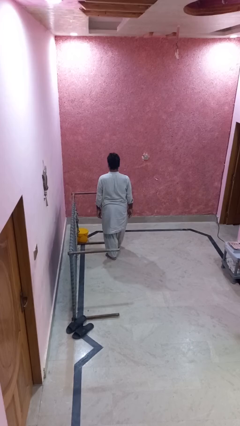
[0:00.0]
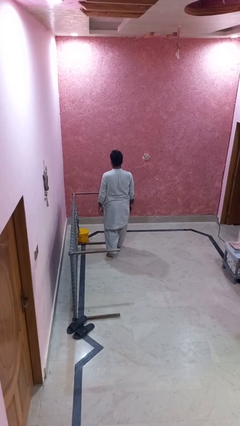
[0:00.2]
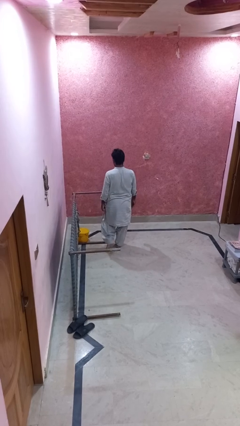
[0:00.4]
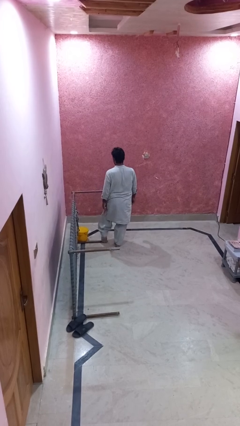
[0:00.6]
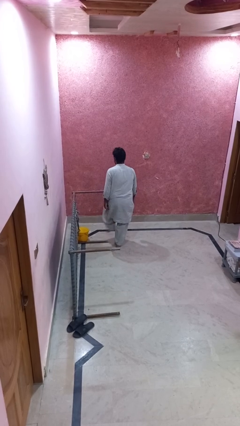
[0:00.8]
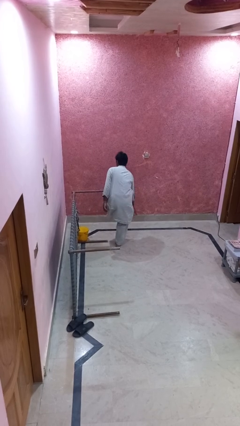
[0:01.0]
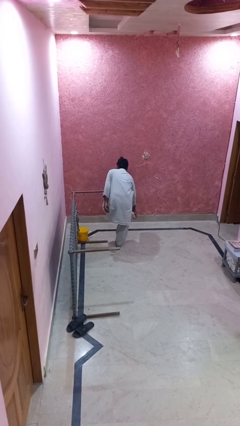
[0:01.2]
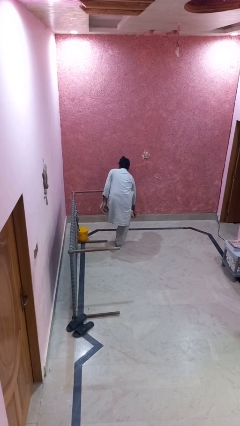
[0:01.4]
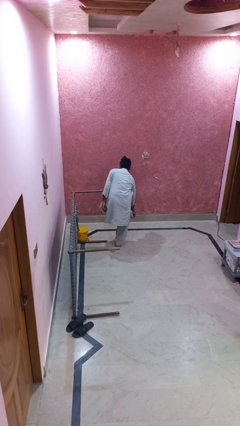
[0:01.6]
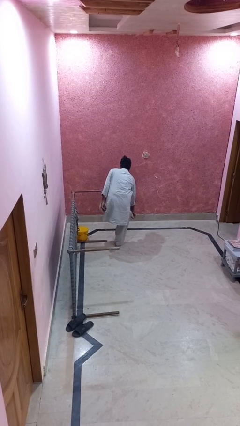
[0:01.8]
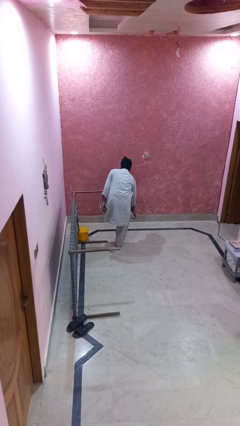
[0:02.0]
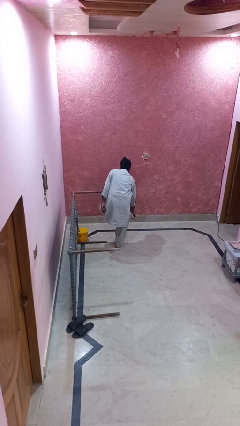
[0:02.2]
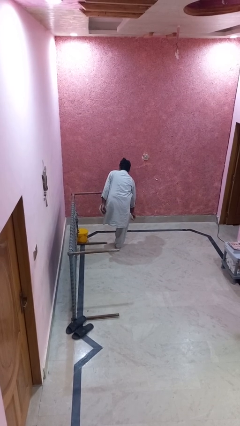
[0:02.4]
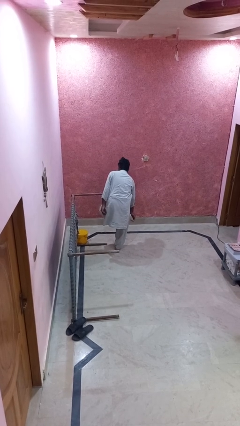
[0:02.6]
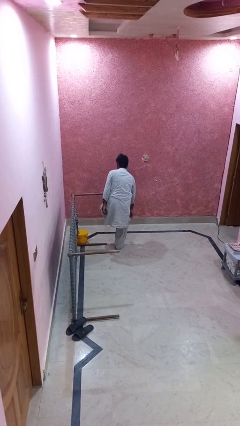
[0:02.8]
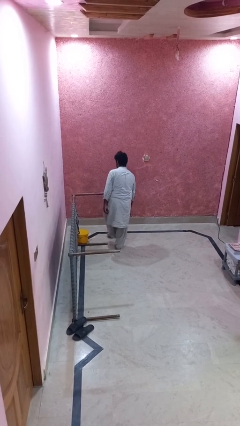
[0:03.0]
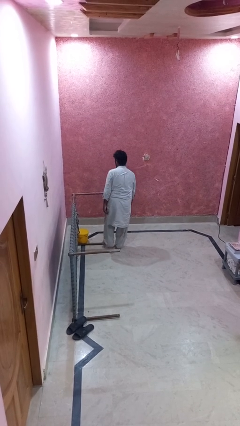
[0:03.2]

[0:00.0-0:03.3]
person stubs toe

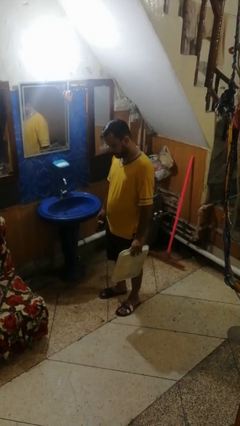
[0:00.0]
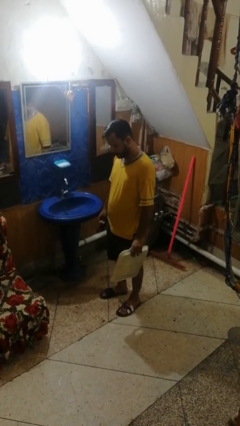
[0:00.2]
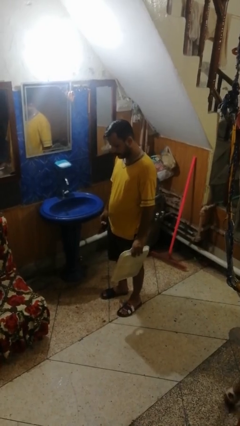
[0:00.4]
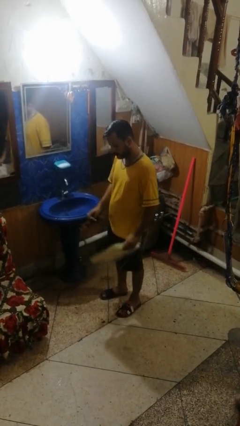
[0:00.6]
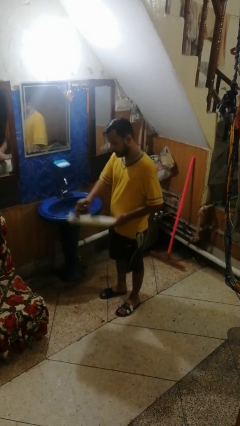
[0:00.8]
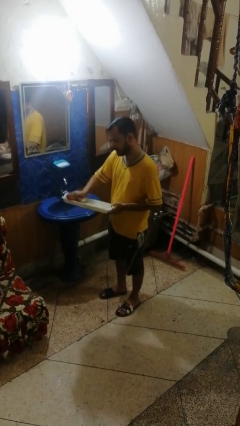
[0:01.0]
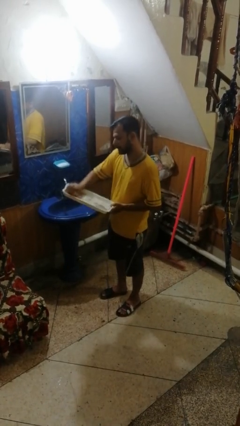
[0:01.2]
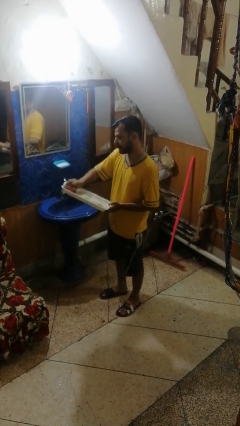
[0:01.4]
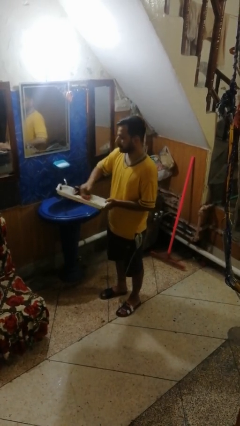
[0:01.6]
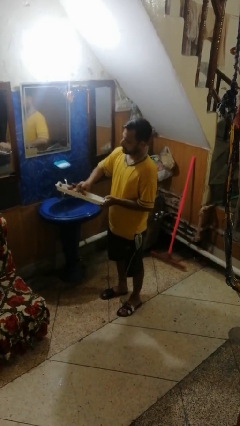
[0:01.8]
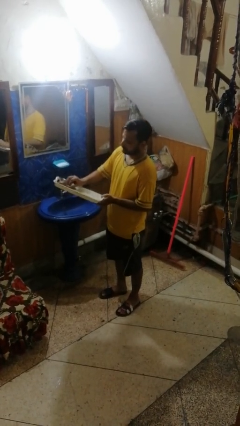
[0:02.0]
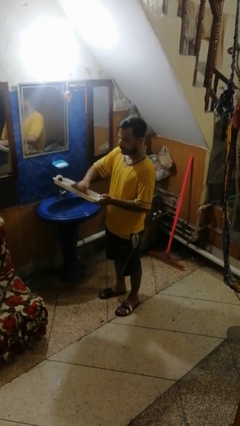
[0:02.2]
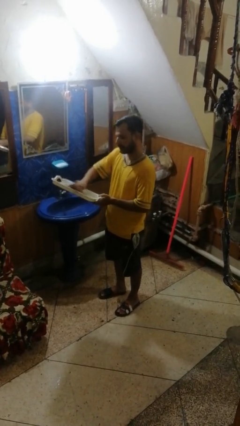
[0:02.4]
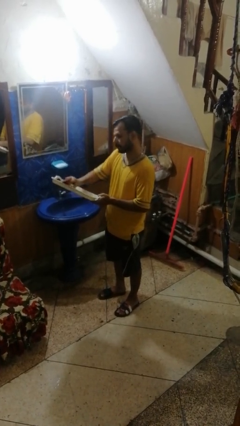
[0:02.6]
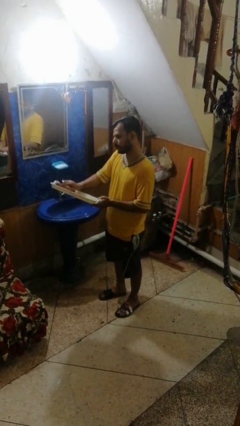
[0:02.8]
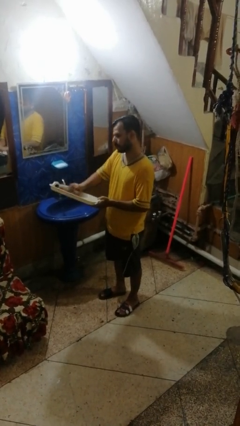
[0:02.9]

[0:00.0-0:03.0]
person dries dish

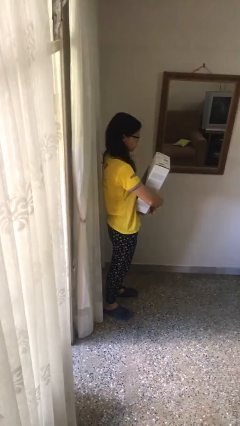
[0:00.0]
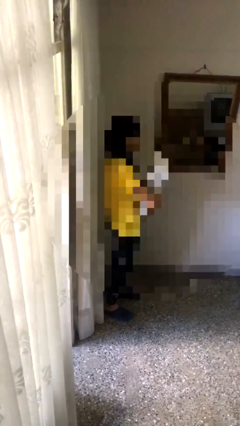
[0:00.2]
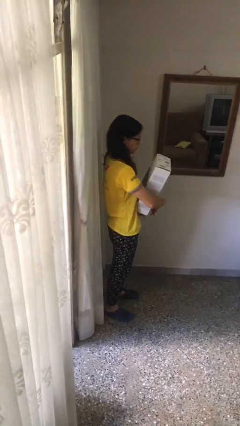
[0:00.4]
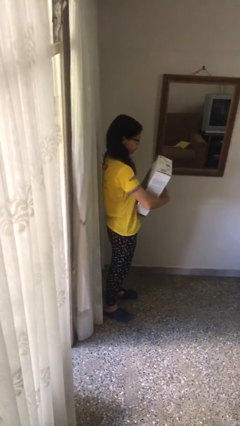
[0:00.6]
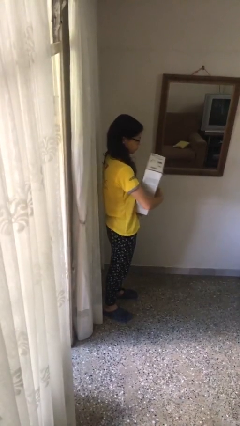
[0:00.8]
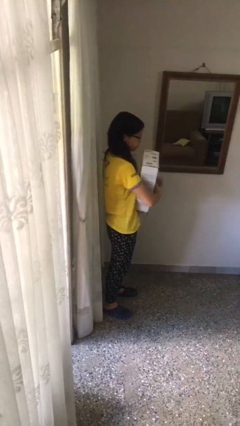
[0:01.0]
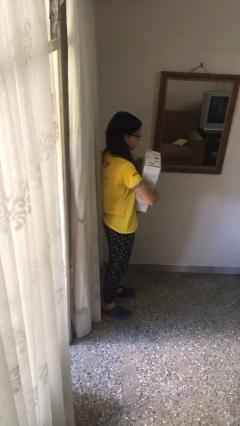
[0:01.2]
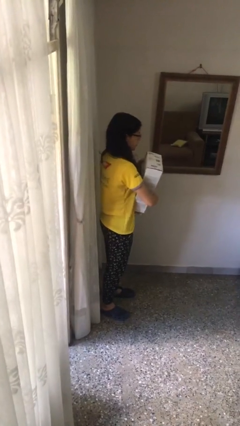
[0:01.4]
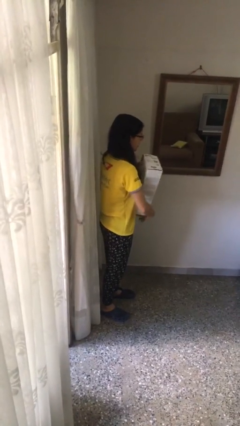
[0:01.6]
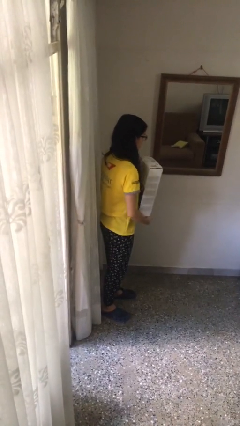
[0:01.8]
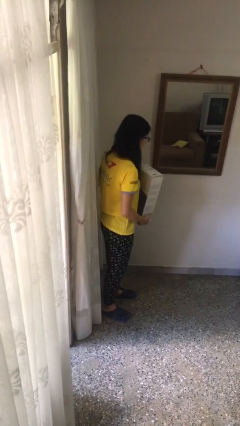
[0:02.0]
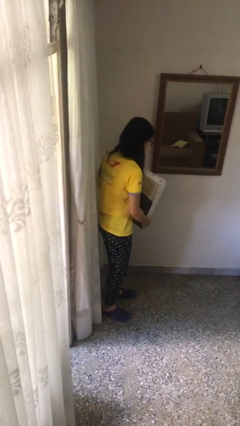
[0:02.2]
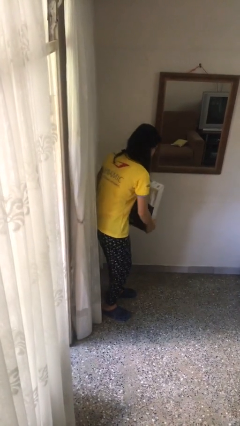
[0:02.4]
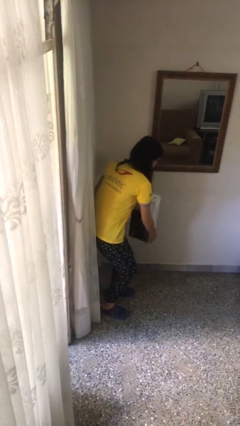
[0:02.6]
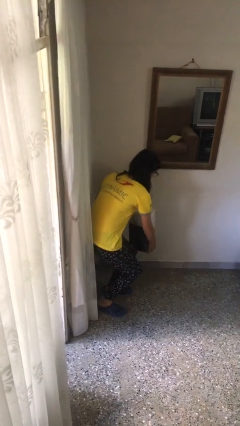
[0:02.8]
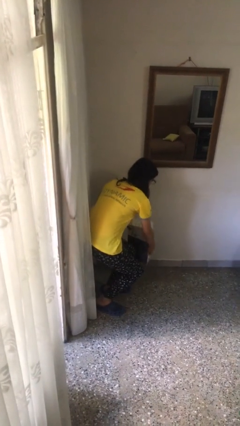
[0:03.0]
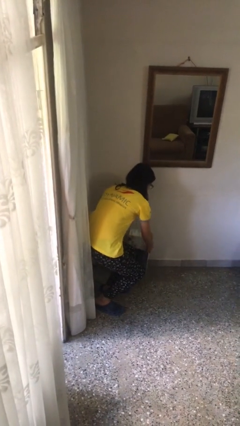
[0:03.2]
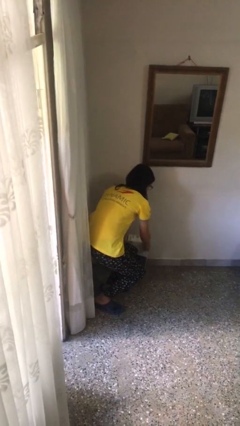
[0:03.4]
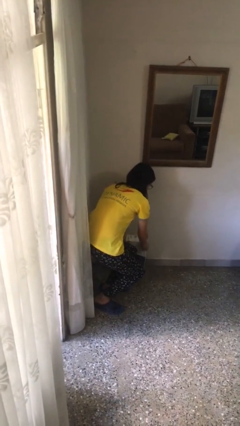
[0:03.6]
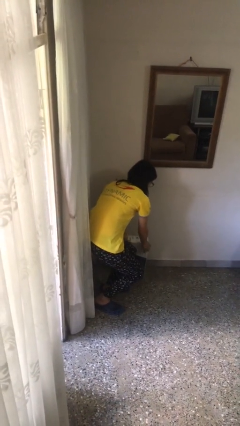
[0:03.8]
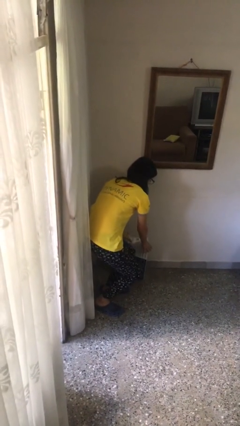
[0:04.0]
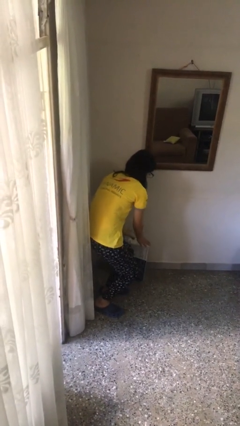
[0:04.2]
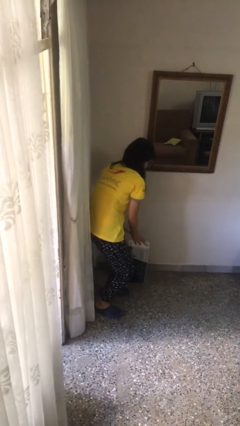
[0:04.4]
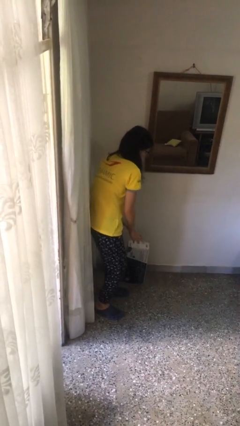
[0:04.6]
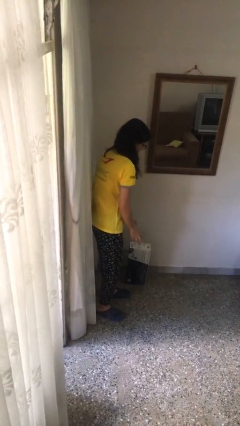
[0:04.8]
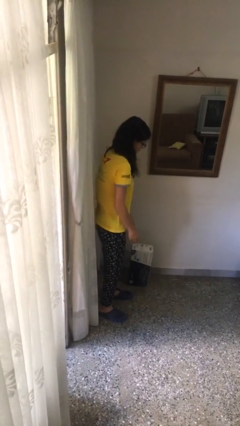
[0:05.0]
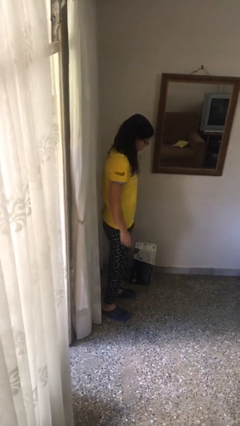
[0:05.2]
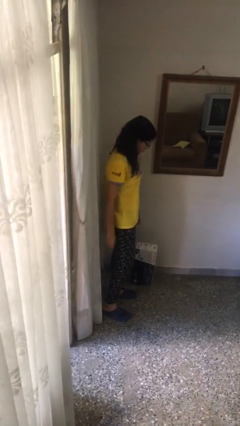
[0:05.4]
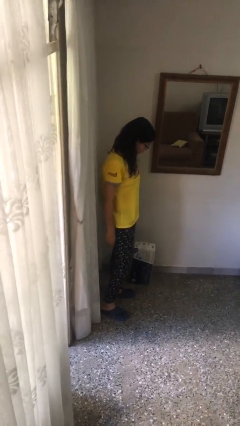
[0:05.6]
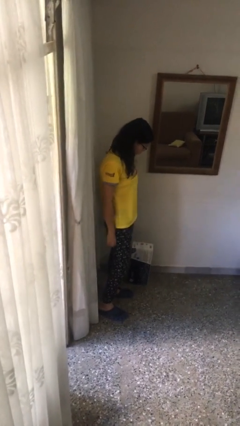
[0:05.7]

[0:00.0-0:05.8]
person puts down object on floor

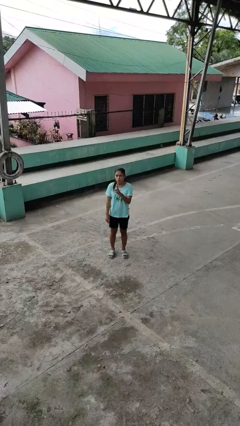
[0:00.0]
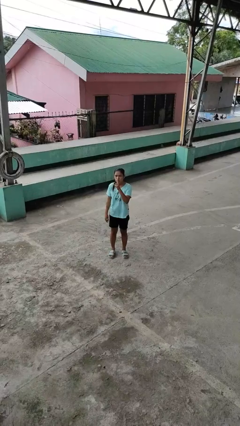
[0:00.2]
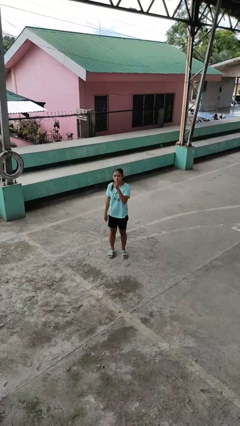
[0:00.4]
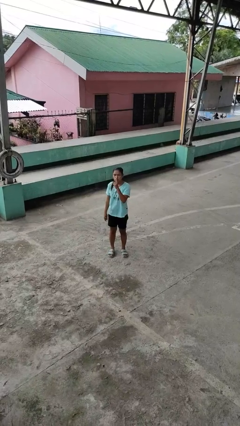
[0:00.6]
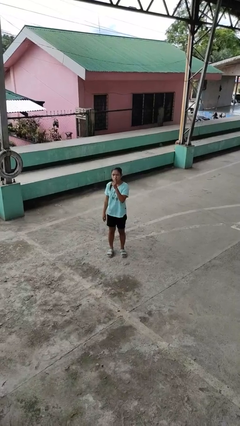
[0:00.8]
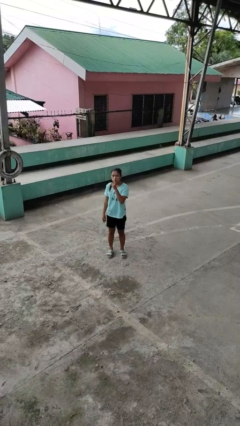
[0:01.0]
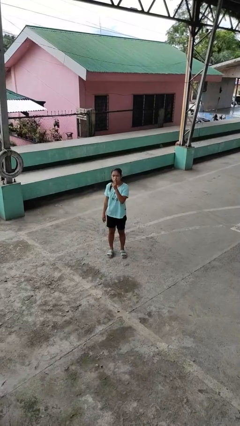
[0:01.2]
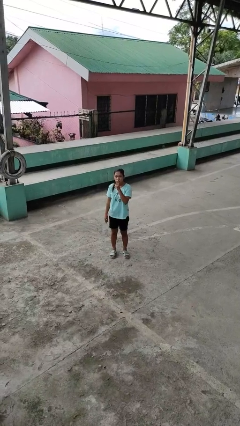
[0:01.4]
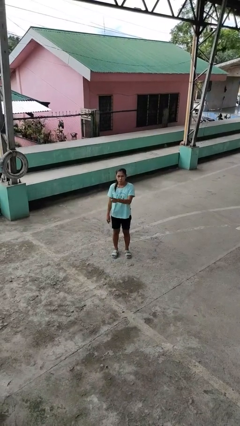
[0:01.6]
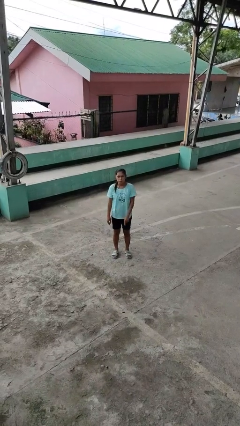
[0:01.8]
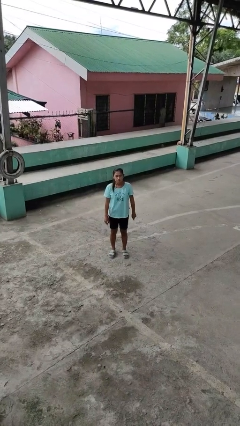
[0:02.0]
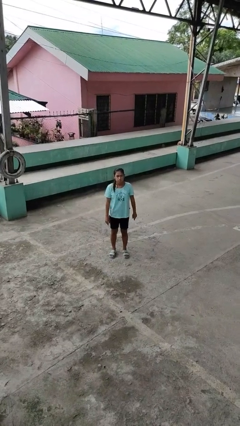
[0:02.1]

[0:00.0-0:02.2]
person gestures be quiet

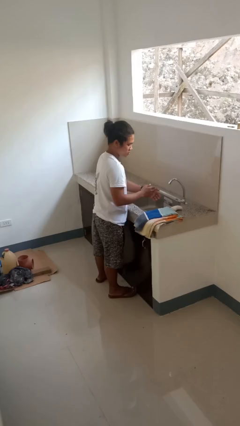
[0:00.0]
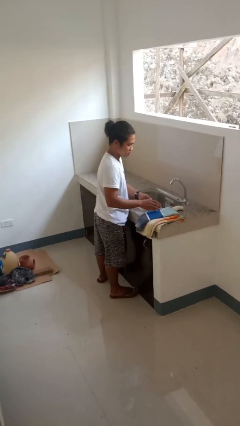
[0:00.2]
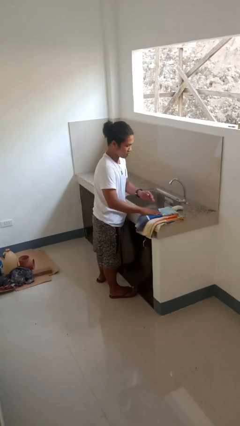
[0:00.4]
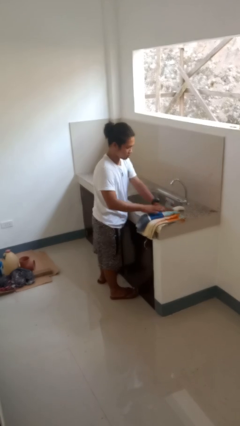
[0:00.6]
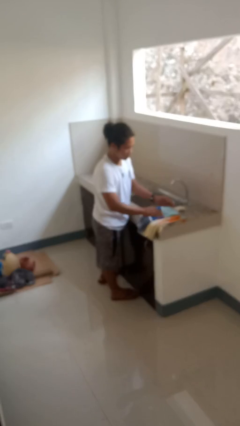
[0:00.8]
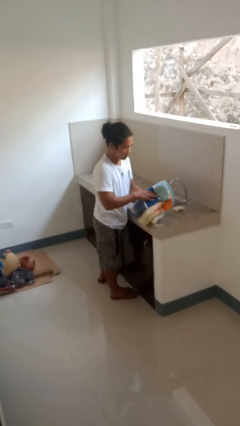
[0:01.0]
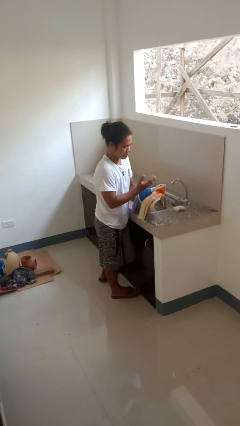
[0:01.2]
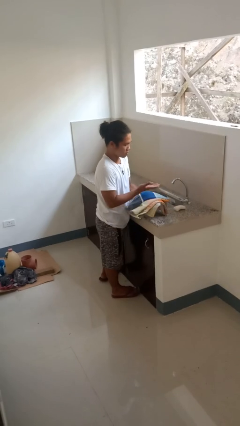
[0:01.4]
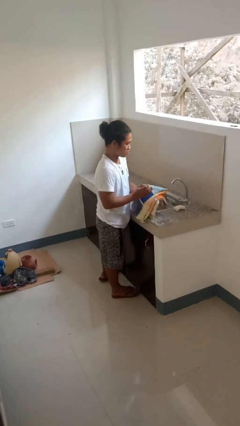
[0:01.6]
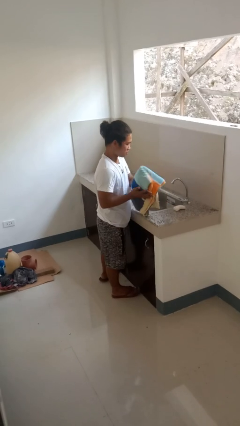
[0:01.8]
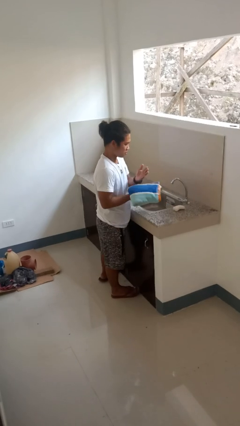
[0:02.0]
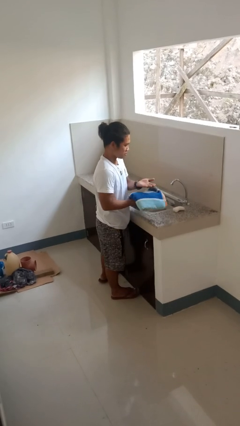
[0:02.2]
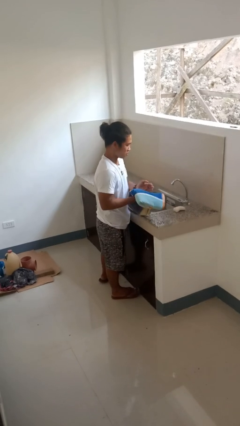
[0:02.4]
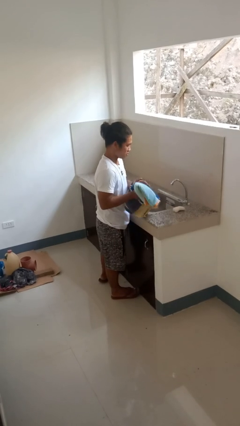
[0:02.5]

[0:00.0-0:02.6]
person dries hands with towel

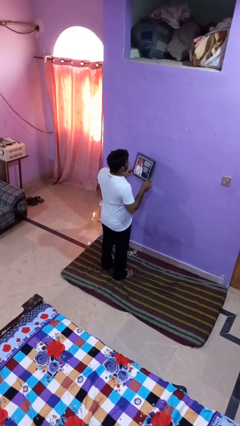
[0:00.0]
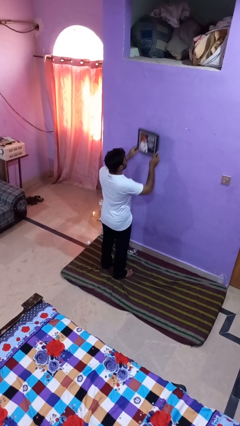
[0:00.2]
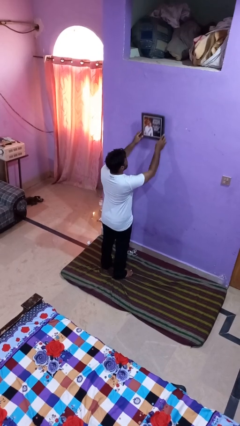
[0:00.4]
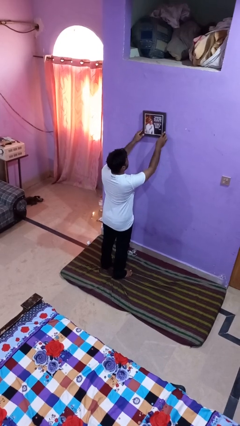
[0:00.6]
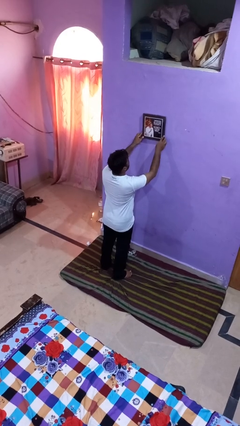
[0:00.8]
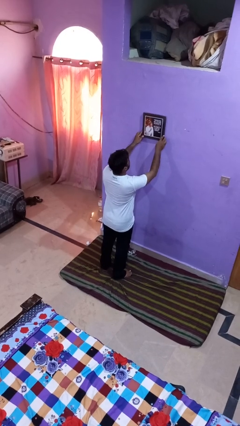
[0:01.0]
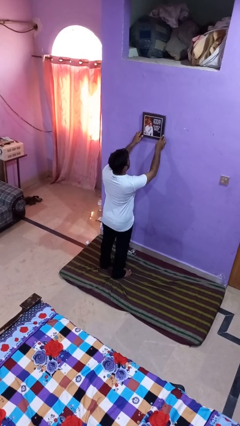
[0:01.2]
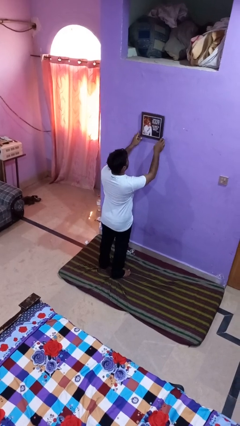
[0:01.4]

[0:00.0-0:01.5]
person takes down picture frame
